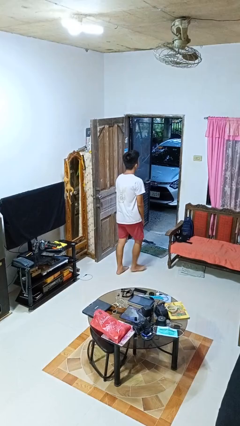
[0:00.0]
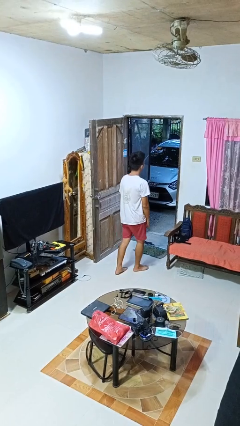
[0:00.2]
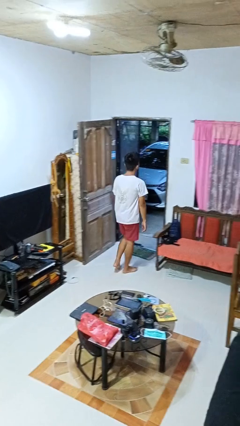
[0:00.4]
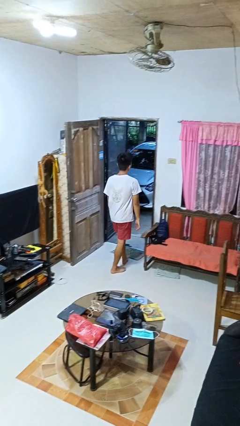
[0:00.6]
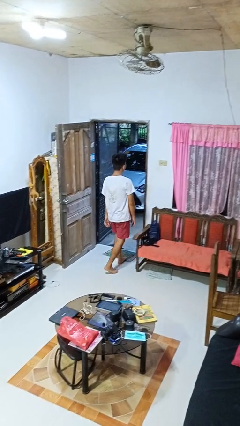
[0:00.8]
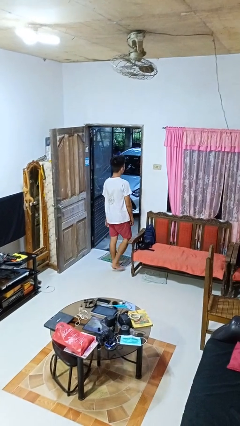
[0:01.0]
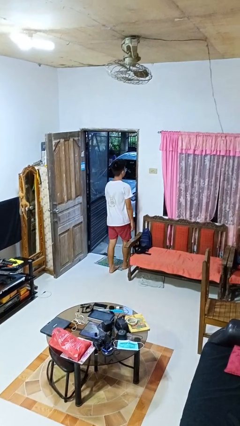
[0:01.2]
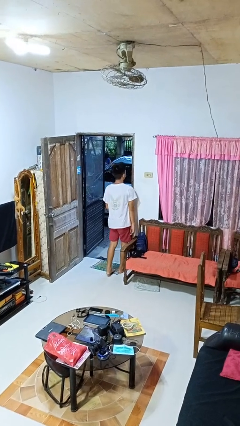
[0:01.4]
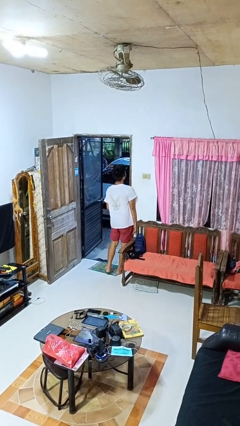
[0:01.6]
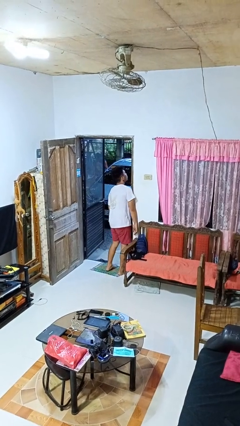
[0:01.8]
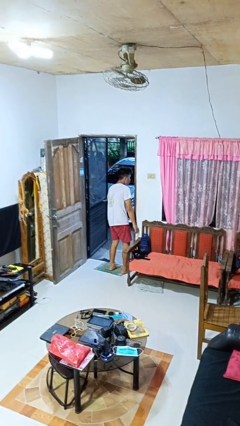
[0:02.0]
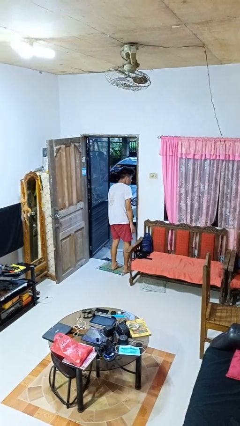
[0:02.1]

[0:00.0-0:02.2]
person bumps into wall

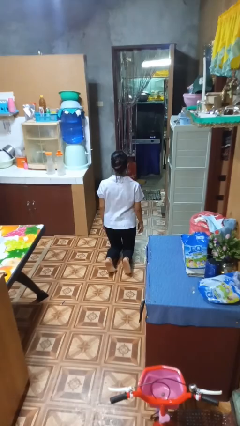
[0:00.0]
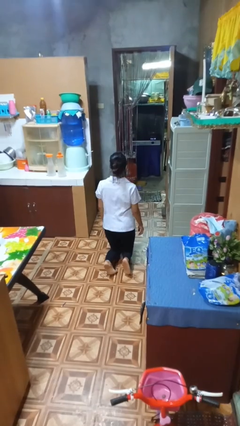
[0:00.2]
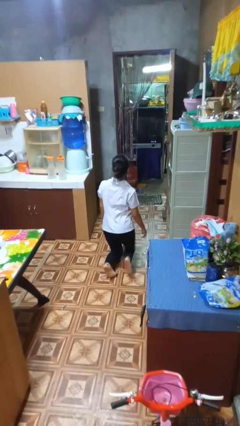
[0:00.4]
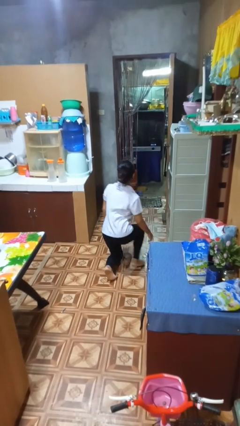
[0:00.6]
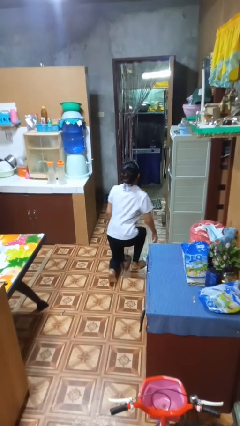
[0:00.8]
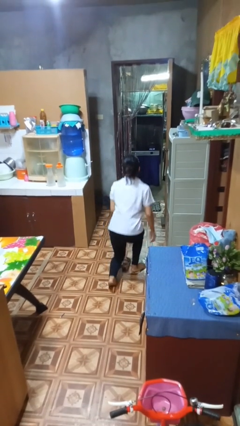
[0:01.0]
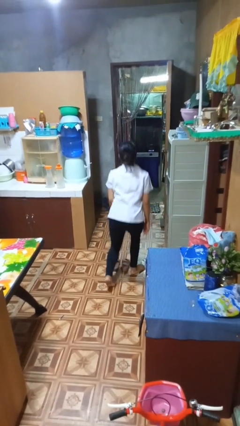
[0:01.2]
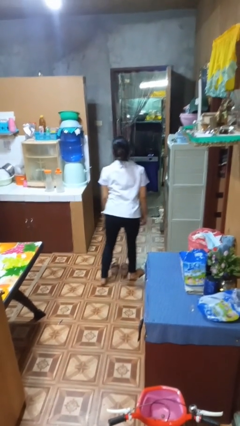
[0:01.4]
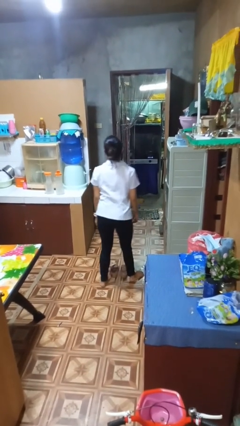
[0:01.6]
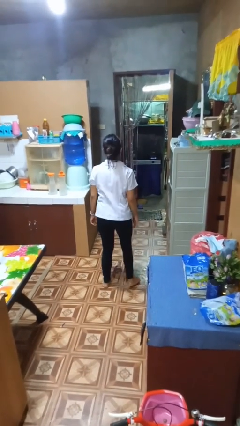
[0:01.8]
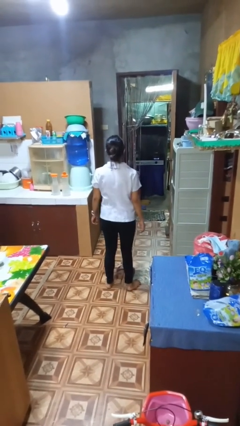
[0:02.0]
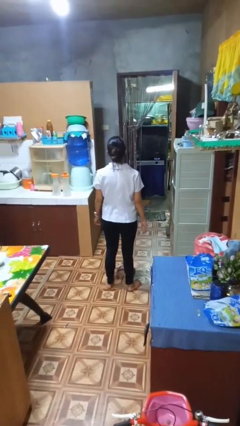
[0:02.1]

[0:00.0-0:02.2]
person stands up from floor

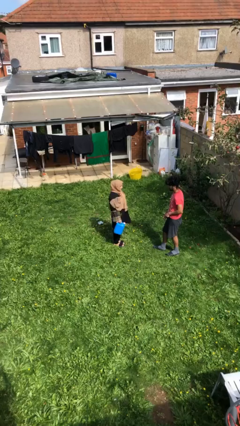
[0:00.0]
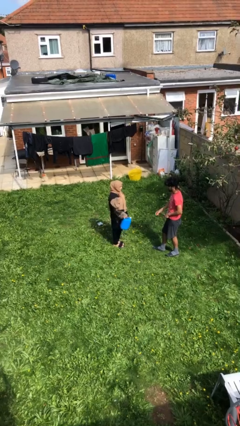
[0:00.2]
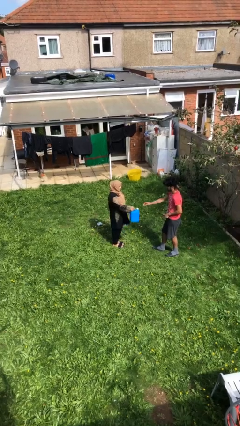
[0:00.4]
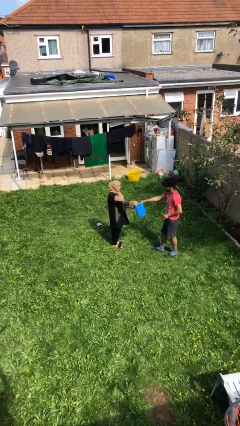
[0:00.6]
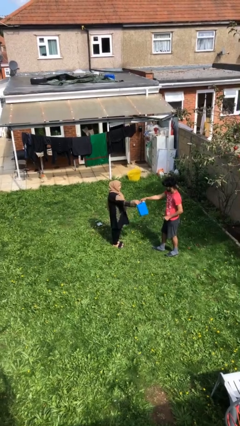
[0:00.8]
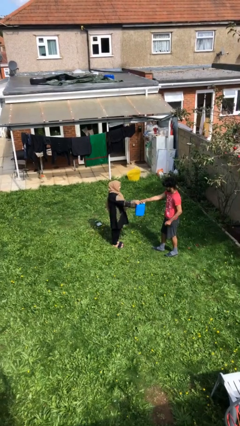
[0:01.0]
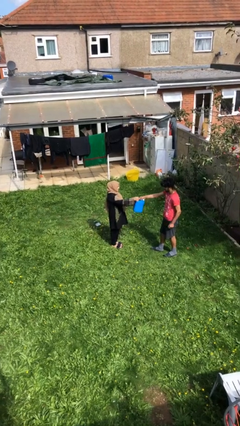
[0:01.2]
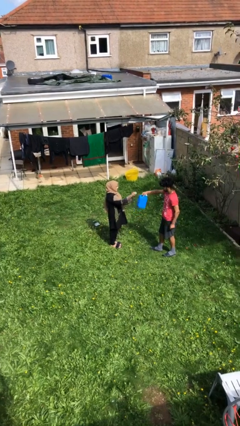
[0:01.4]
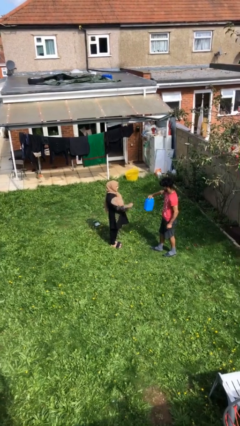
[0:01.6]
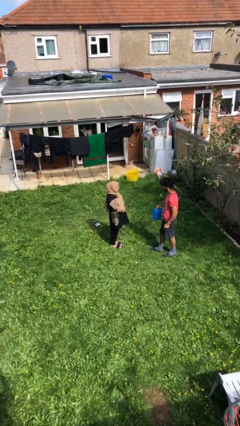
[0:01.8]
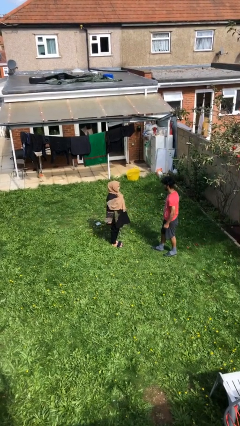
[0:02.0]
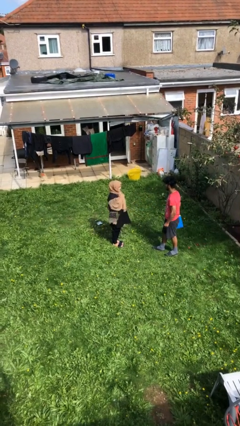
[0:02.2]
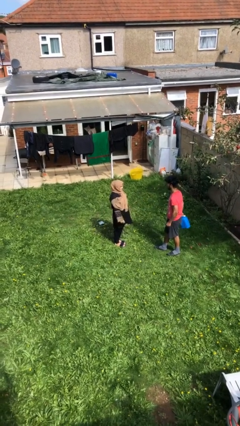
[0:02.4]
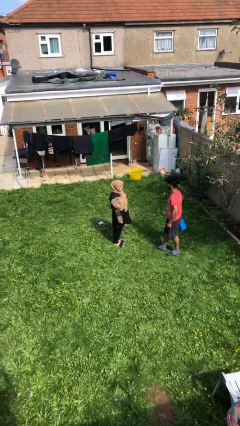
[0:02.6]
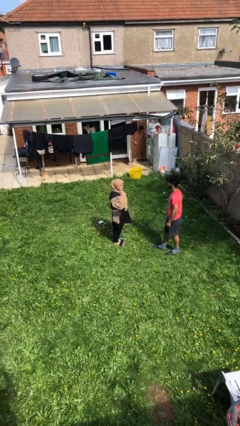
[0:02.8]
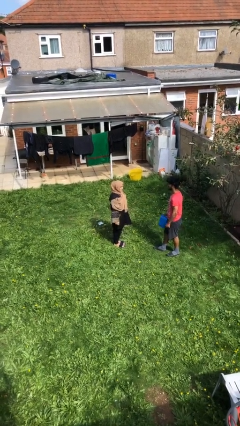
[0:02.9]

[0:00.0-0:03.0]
person transfers object to person

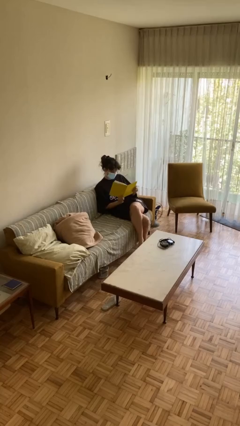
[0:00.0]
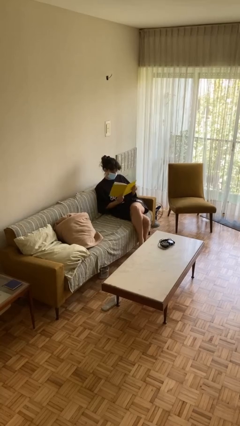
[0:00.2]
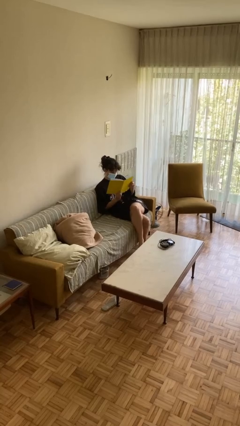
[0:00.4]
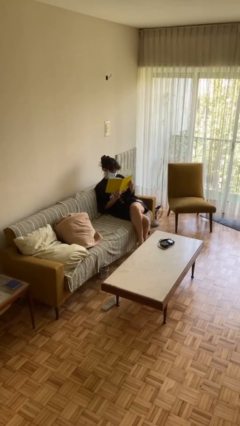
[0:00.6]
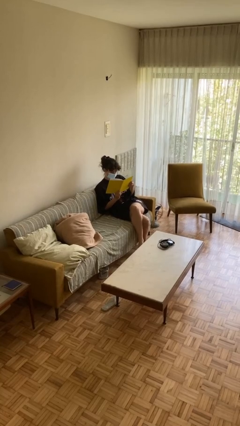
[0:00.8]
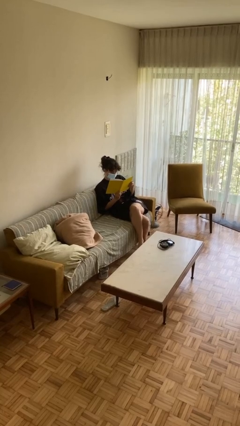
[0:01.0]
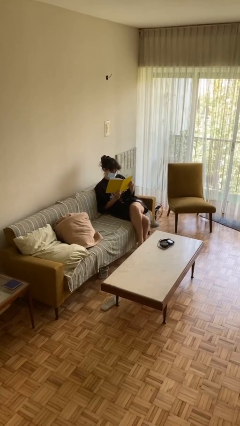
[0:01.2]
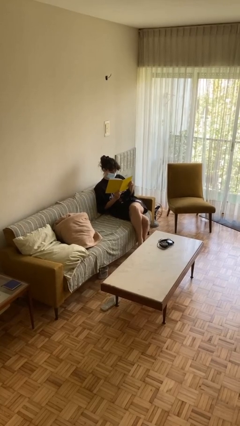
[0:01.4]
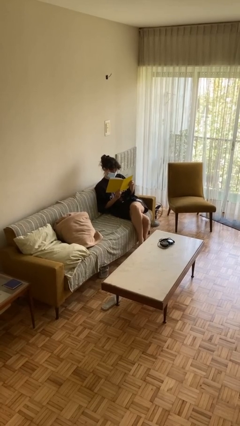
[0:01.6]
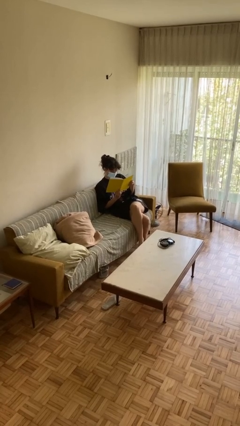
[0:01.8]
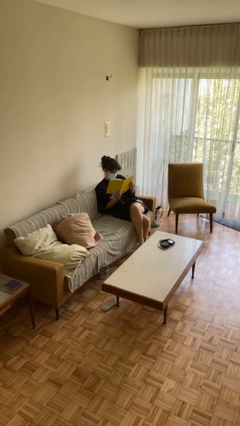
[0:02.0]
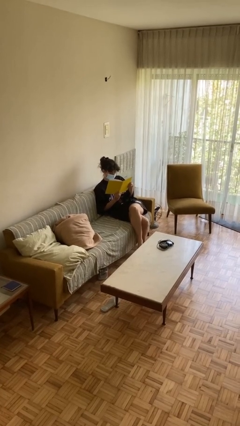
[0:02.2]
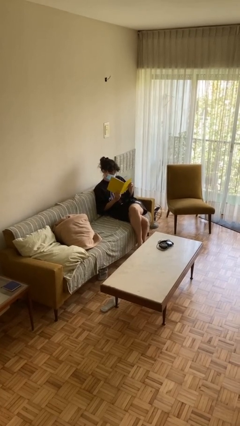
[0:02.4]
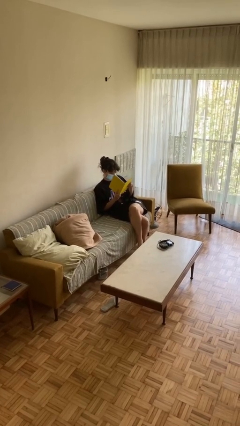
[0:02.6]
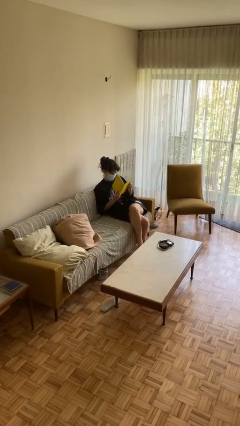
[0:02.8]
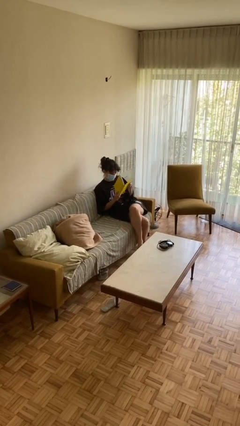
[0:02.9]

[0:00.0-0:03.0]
person reads document

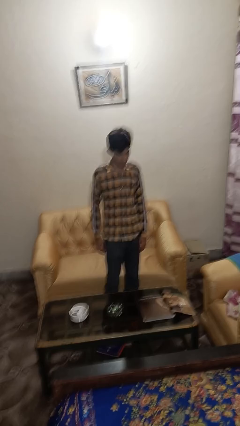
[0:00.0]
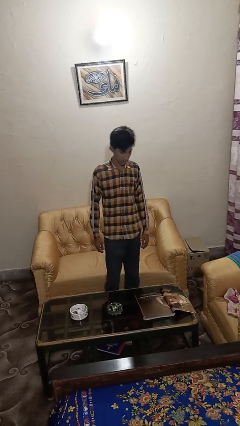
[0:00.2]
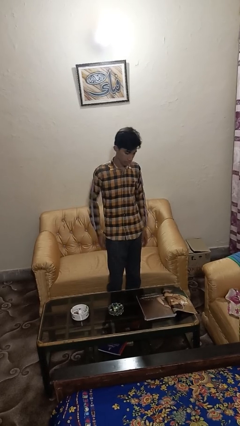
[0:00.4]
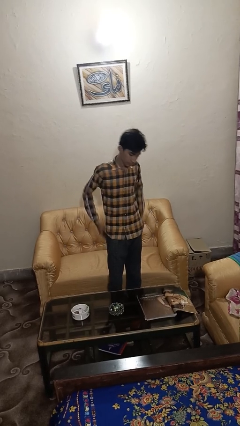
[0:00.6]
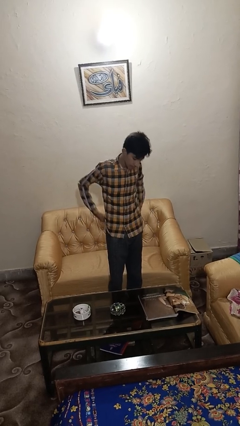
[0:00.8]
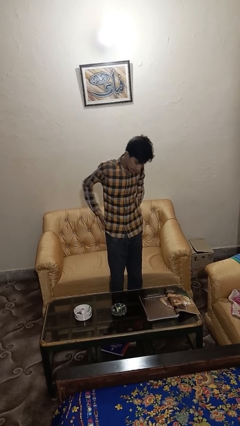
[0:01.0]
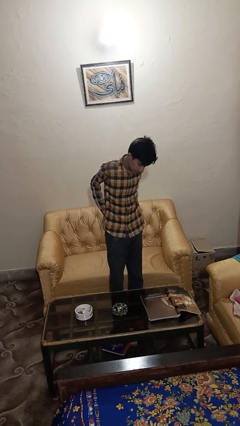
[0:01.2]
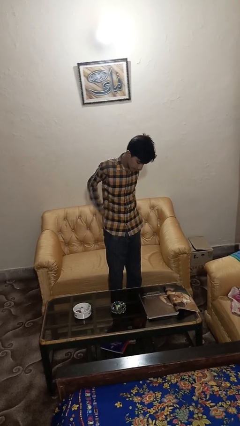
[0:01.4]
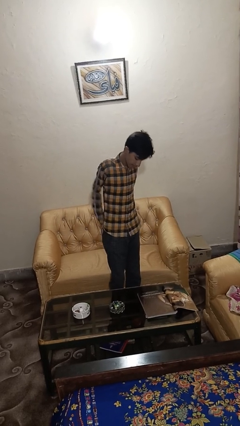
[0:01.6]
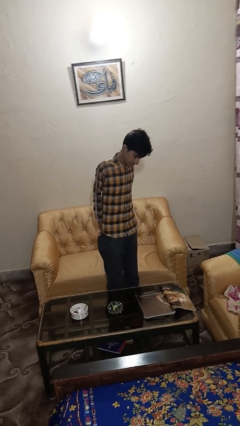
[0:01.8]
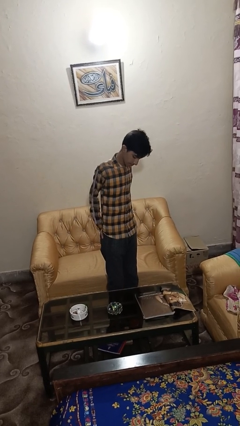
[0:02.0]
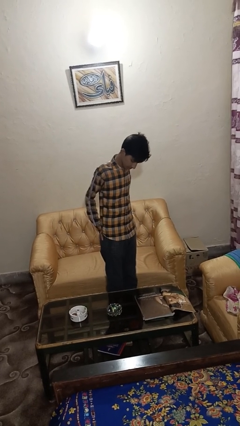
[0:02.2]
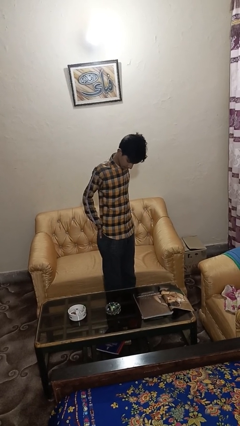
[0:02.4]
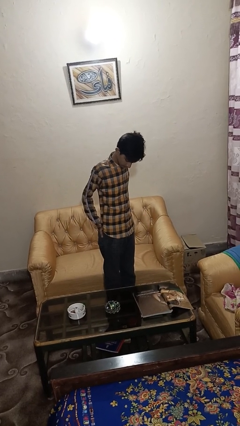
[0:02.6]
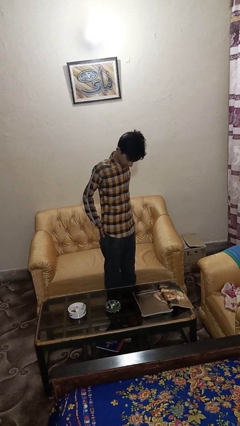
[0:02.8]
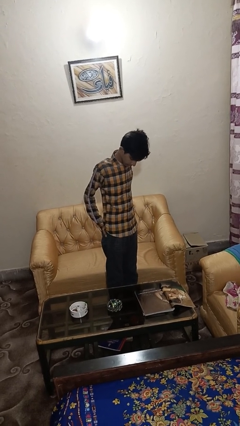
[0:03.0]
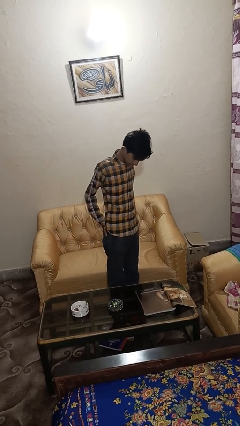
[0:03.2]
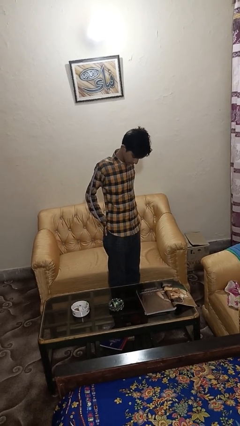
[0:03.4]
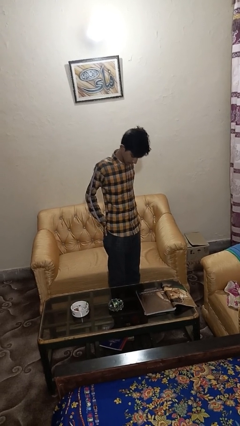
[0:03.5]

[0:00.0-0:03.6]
person puts hands in back pockets

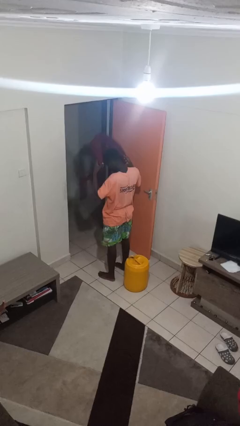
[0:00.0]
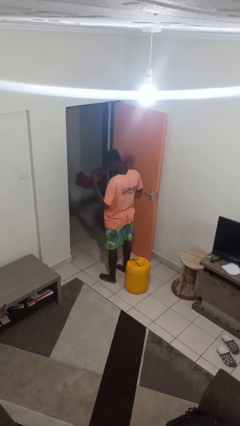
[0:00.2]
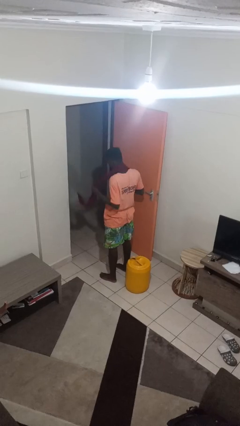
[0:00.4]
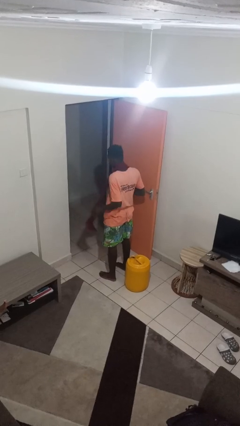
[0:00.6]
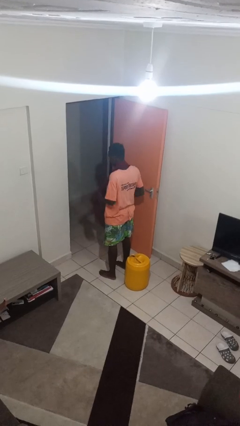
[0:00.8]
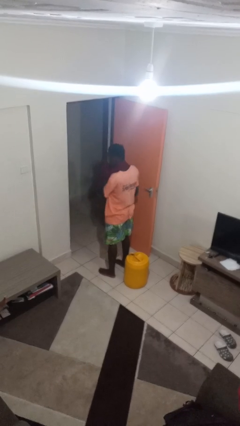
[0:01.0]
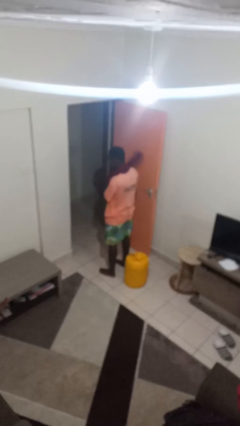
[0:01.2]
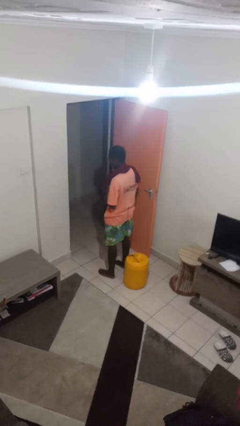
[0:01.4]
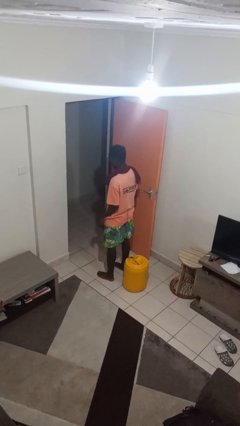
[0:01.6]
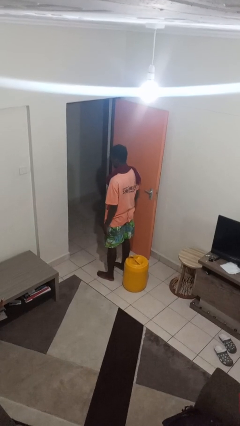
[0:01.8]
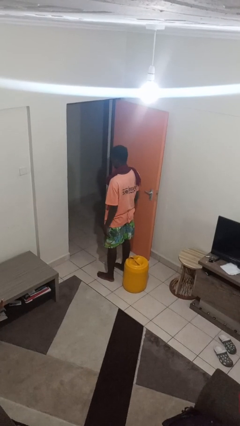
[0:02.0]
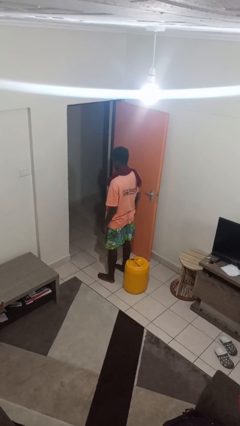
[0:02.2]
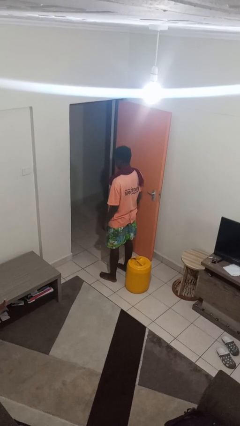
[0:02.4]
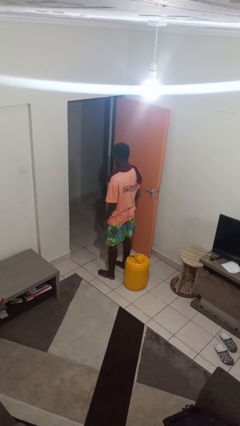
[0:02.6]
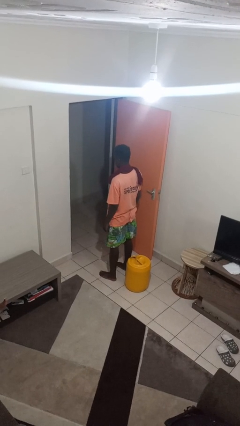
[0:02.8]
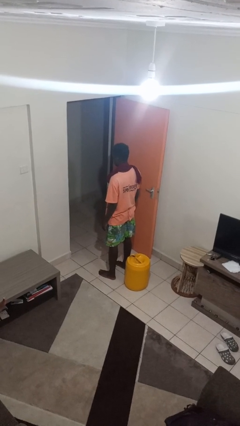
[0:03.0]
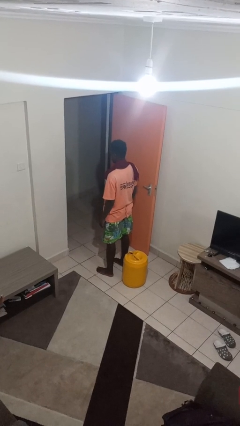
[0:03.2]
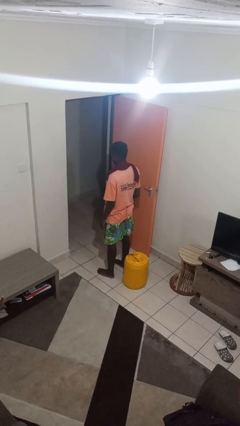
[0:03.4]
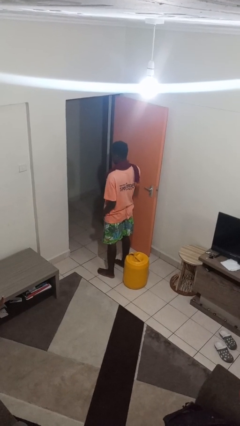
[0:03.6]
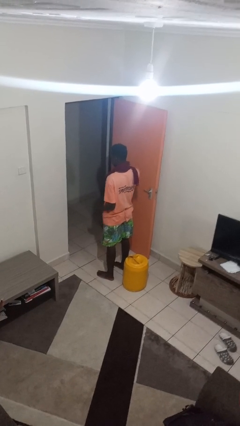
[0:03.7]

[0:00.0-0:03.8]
person puts on scarf
